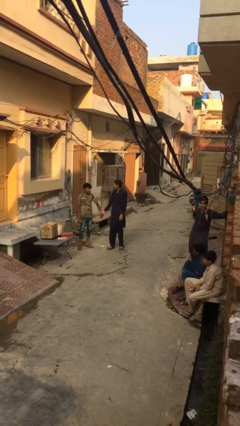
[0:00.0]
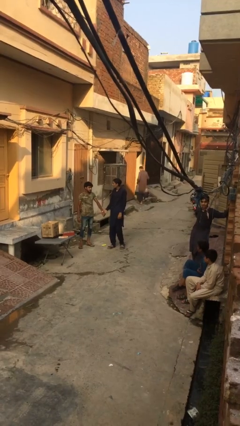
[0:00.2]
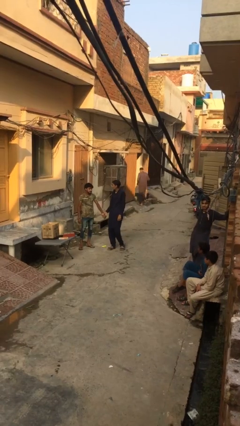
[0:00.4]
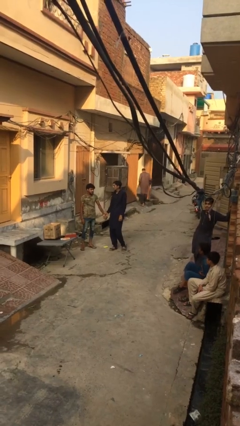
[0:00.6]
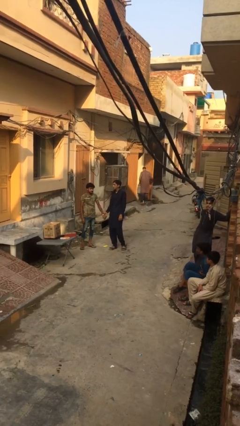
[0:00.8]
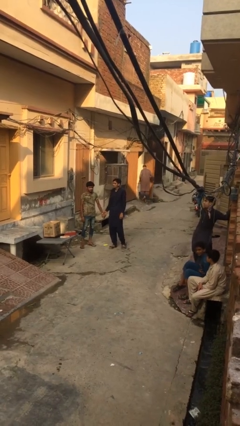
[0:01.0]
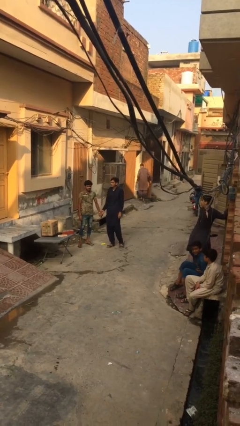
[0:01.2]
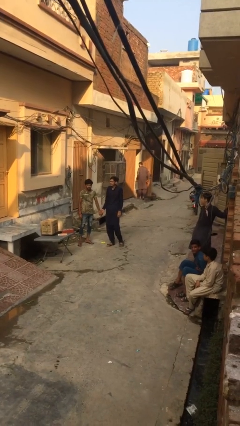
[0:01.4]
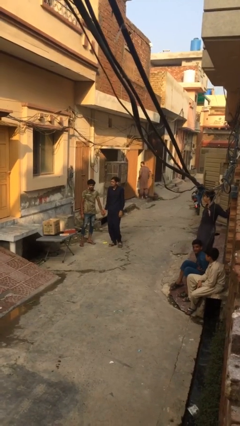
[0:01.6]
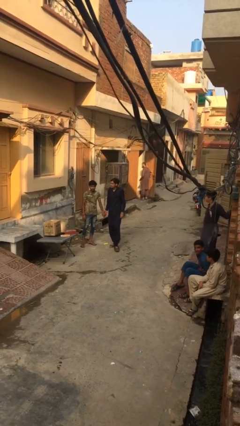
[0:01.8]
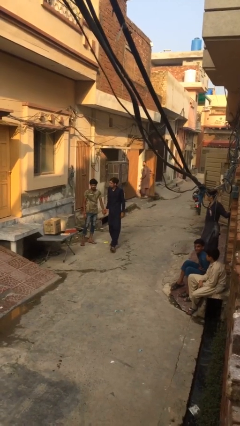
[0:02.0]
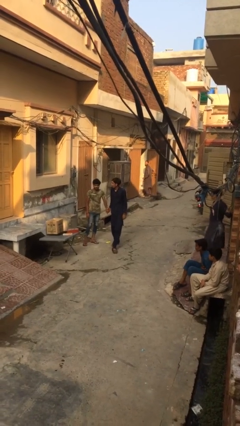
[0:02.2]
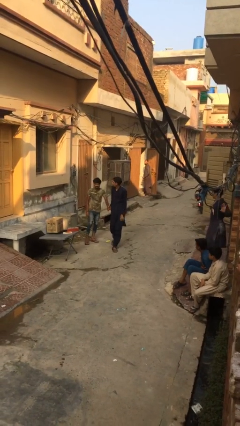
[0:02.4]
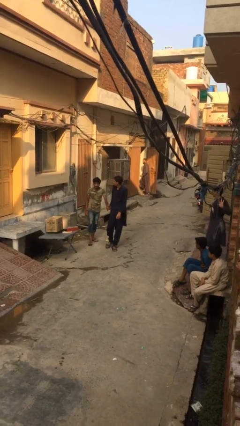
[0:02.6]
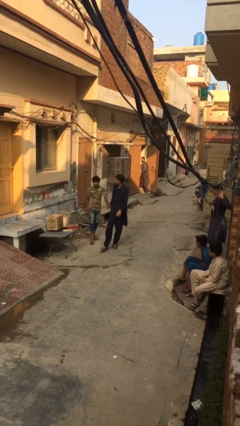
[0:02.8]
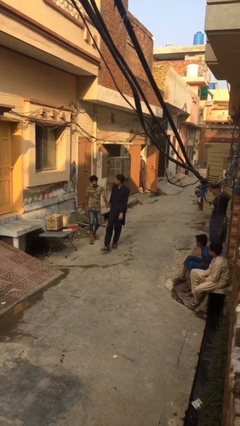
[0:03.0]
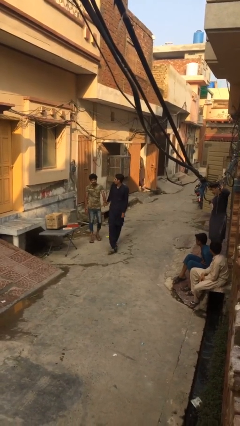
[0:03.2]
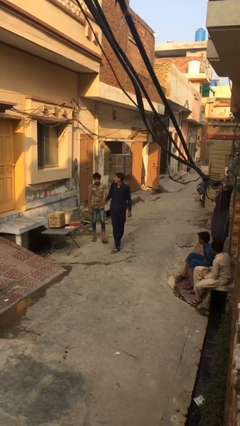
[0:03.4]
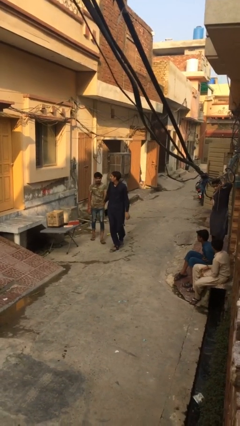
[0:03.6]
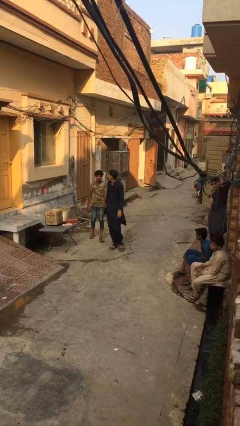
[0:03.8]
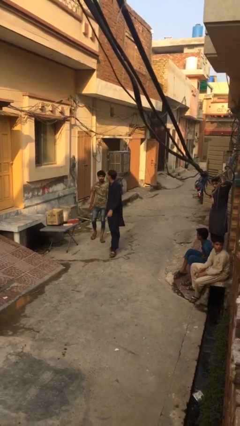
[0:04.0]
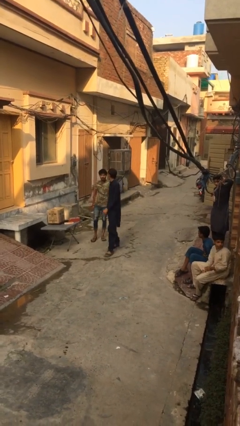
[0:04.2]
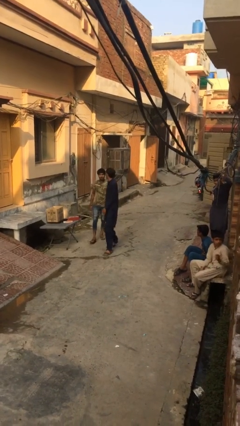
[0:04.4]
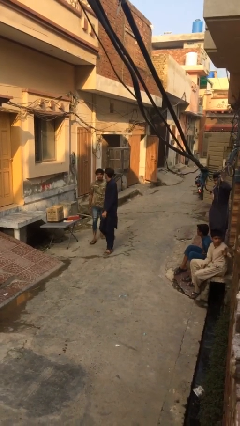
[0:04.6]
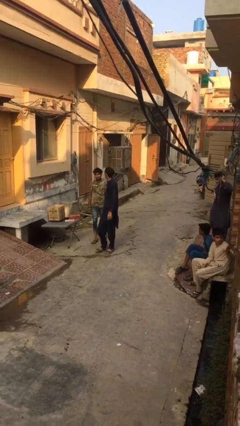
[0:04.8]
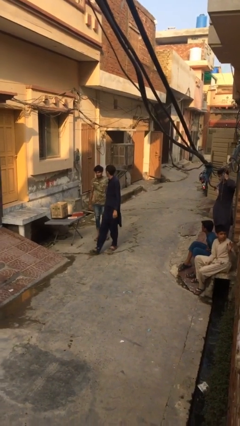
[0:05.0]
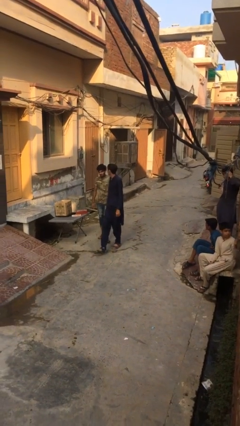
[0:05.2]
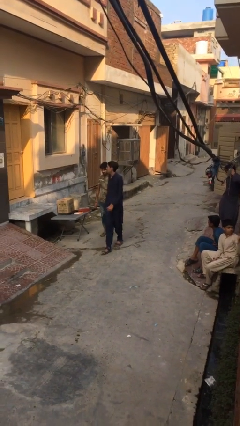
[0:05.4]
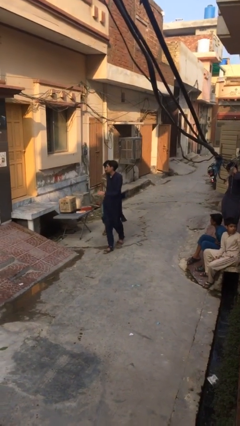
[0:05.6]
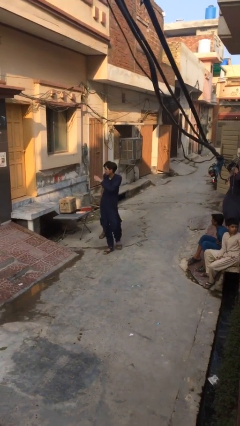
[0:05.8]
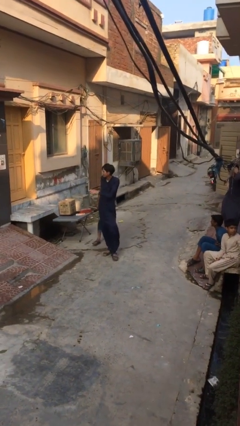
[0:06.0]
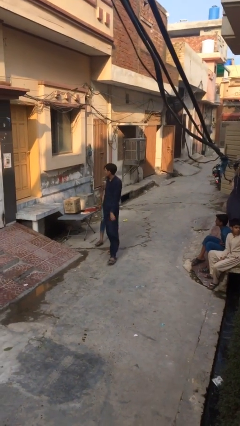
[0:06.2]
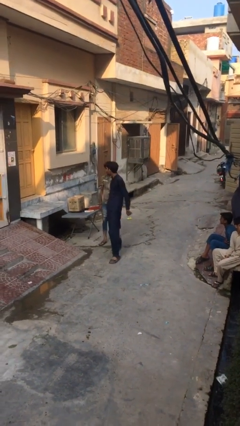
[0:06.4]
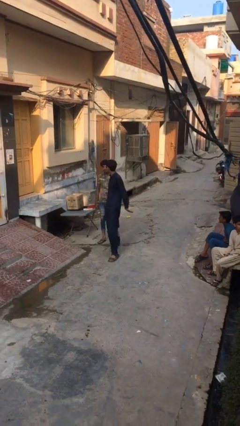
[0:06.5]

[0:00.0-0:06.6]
person holds hand

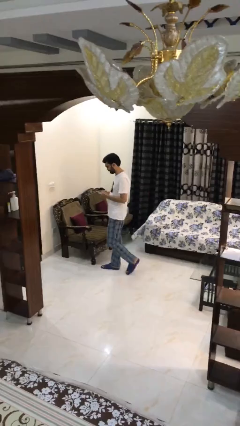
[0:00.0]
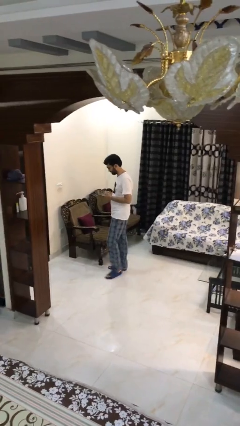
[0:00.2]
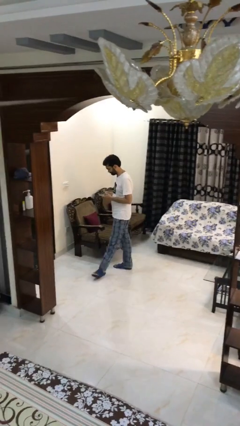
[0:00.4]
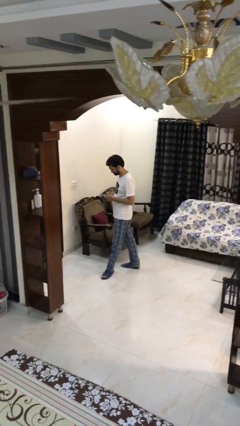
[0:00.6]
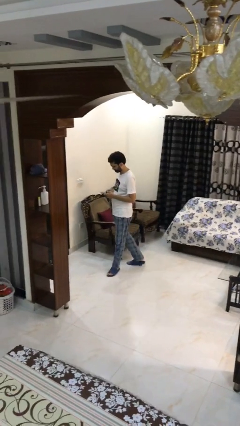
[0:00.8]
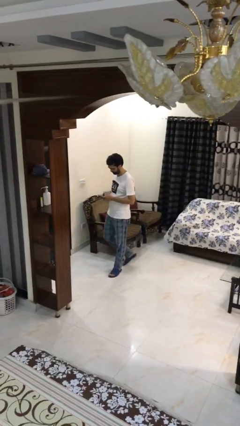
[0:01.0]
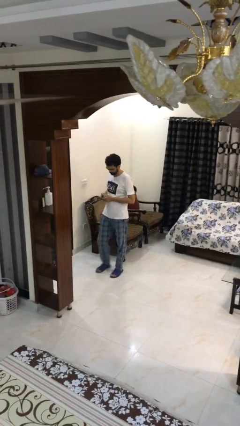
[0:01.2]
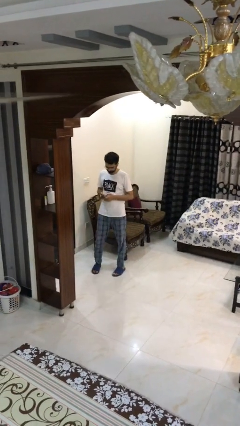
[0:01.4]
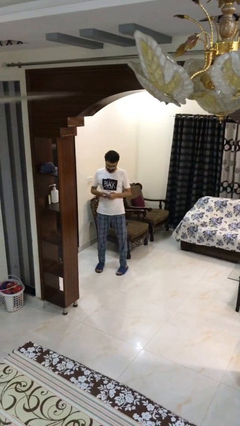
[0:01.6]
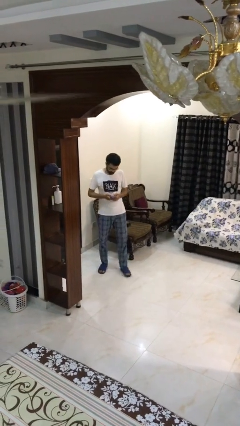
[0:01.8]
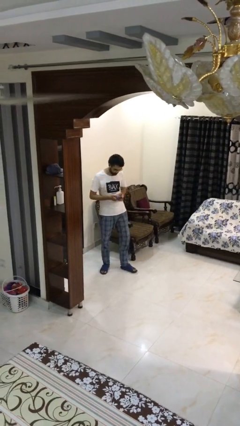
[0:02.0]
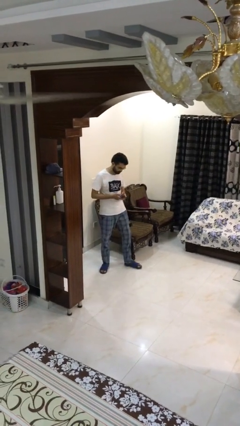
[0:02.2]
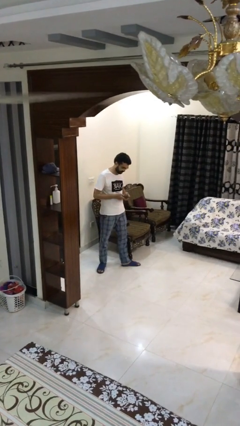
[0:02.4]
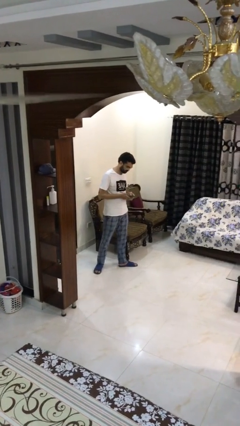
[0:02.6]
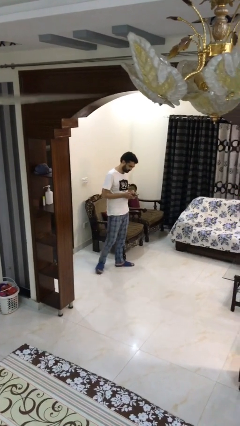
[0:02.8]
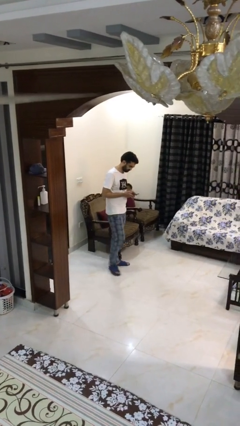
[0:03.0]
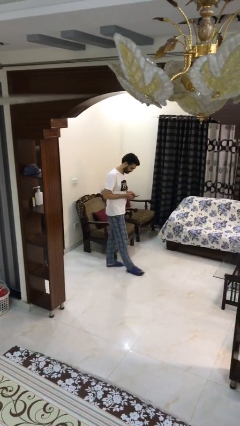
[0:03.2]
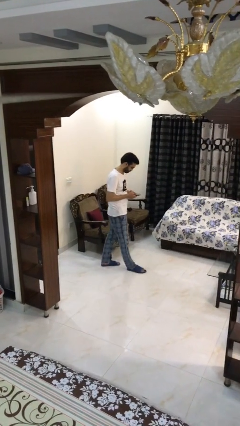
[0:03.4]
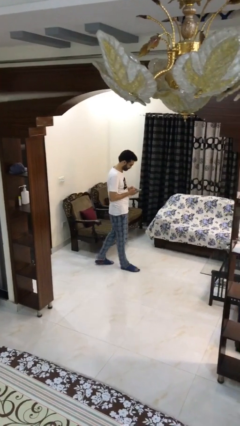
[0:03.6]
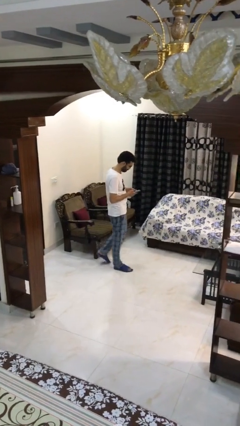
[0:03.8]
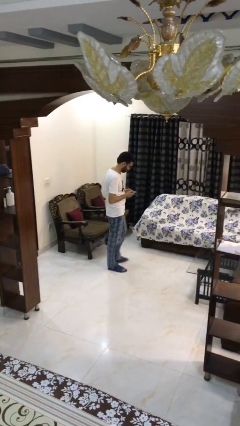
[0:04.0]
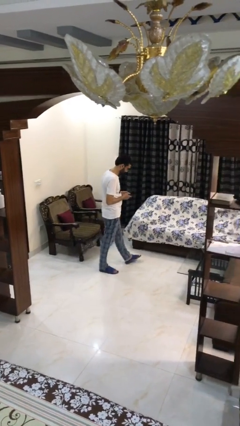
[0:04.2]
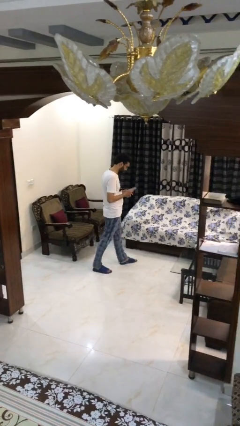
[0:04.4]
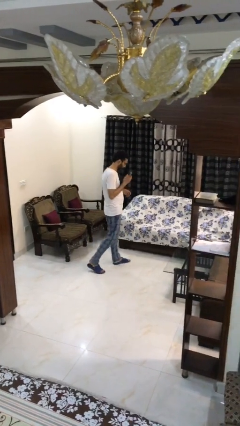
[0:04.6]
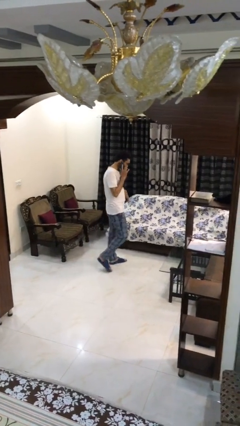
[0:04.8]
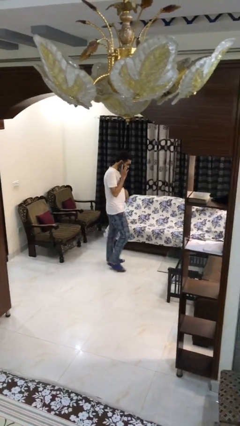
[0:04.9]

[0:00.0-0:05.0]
person texts on phone

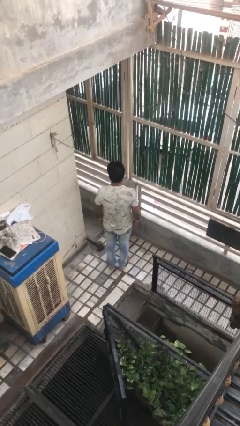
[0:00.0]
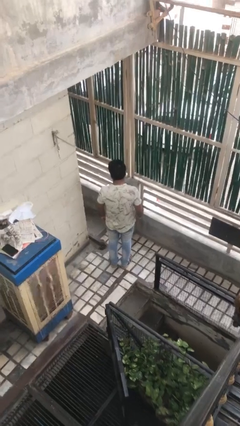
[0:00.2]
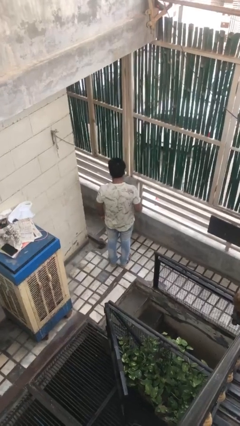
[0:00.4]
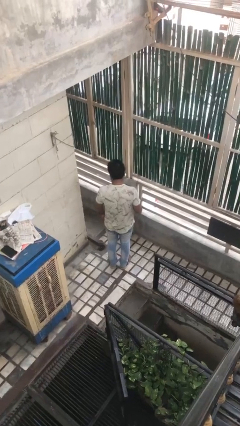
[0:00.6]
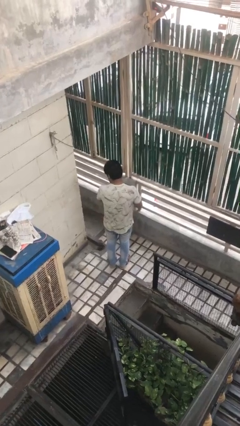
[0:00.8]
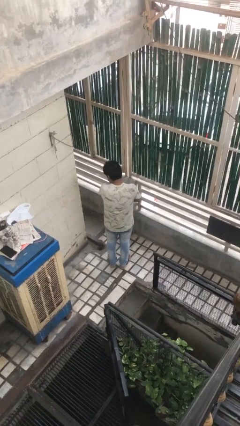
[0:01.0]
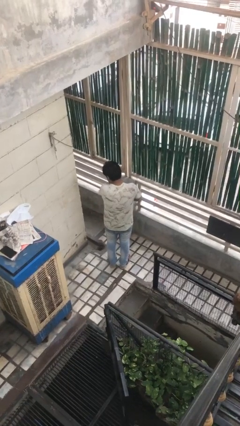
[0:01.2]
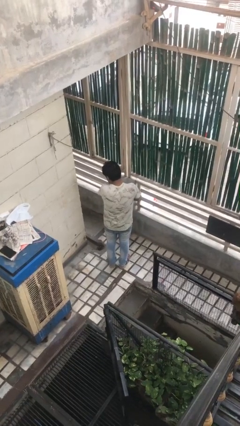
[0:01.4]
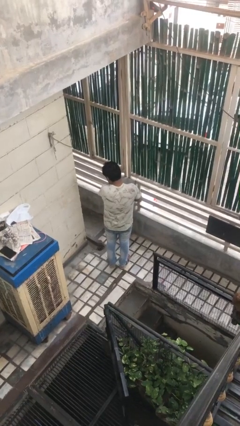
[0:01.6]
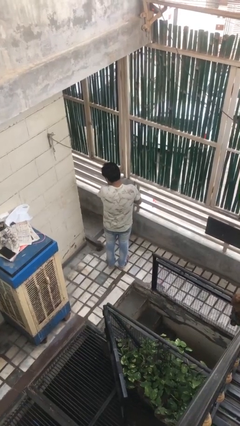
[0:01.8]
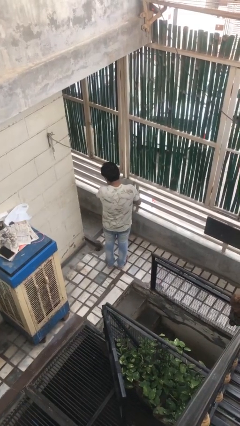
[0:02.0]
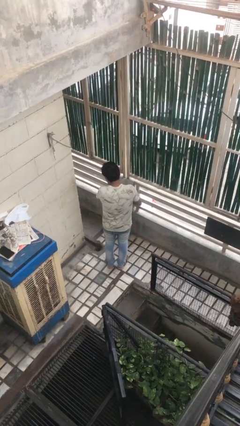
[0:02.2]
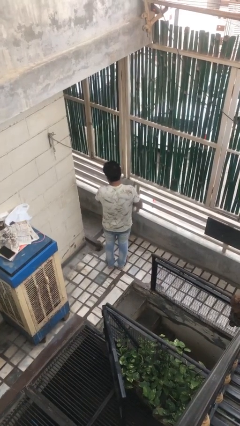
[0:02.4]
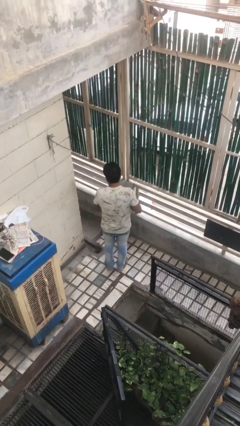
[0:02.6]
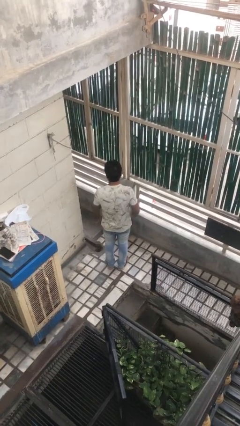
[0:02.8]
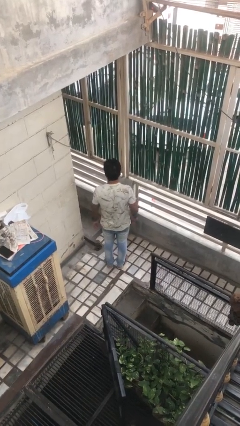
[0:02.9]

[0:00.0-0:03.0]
person swats bug

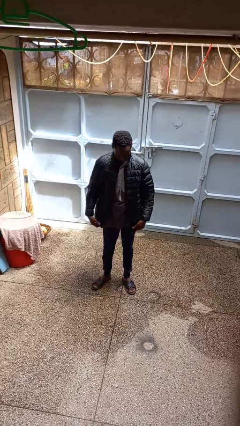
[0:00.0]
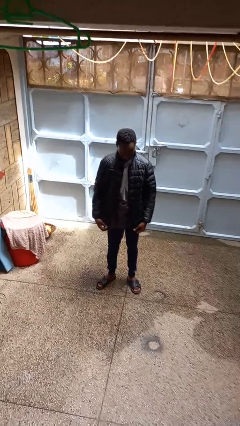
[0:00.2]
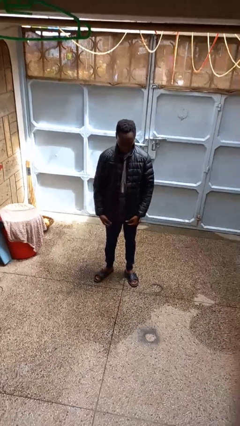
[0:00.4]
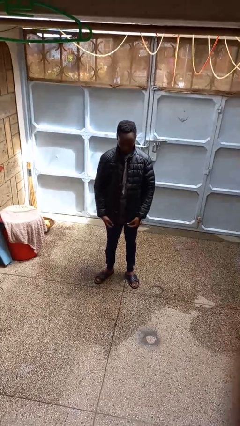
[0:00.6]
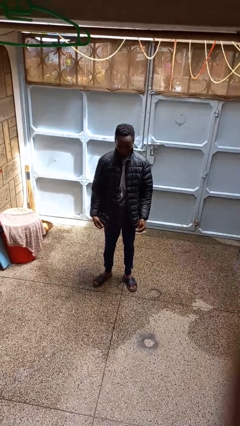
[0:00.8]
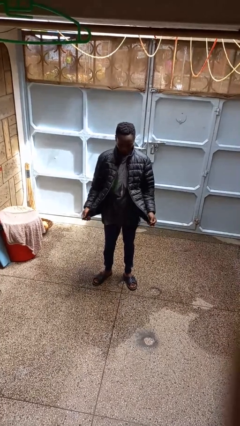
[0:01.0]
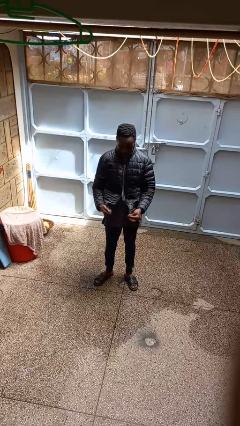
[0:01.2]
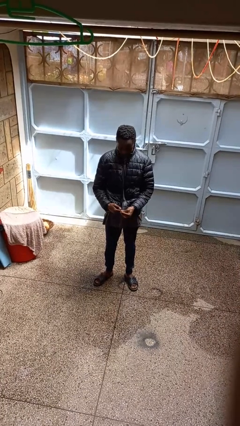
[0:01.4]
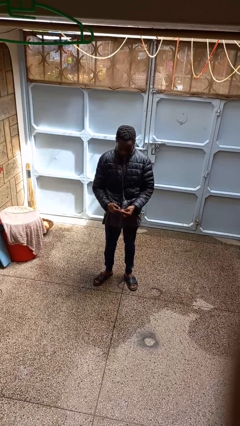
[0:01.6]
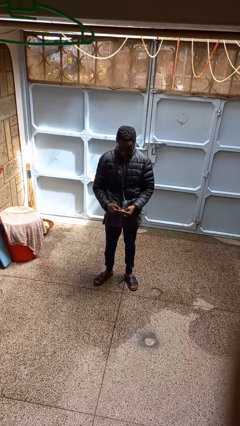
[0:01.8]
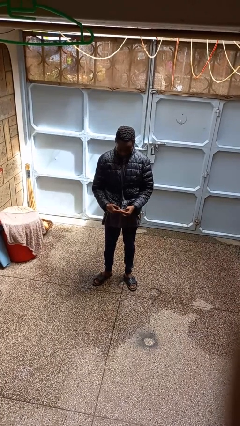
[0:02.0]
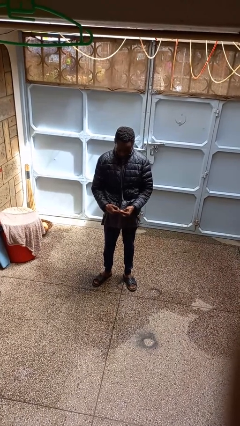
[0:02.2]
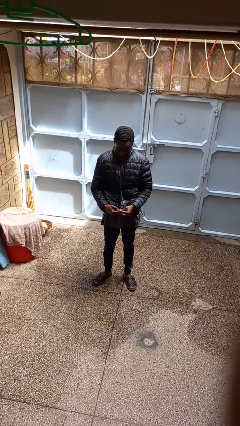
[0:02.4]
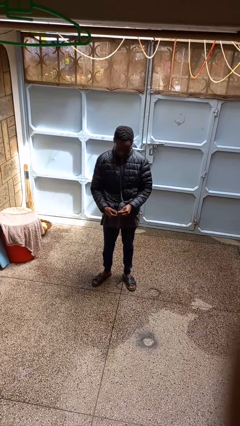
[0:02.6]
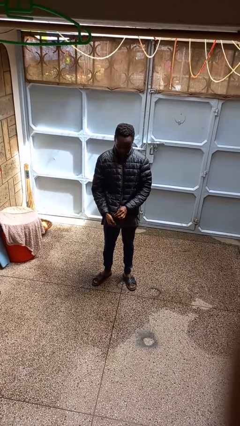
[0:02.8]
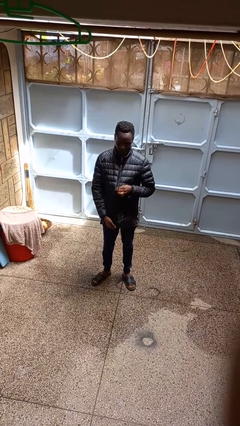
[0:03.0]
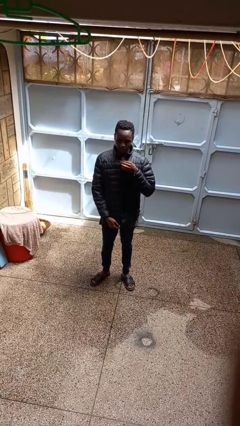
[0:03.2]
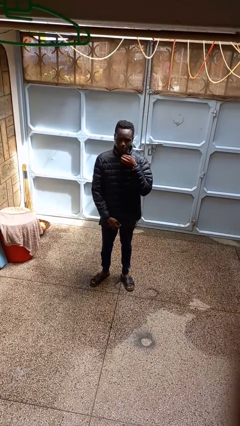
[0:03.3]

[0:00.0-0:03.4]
person zips up jacket

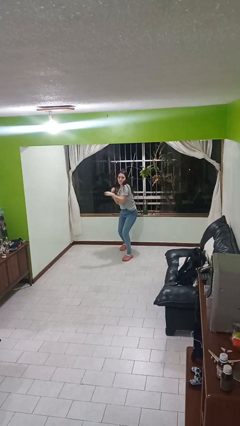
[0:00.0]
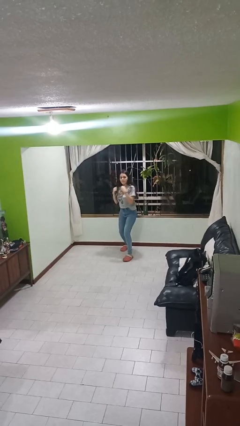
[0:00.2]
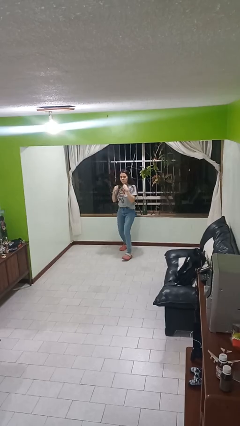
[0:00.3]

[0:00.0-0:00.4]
person punches
